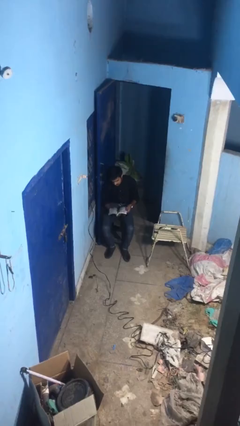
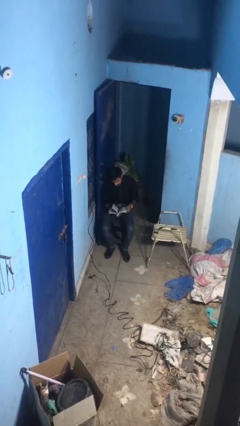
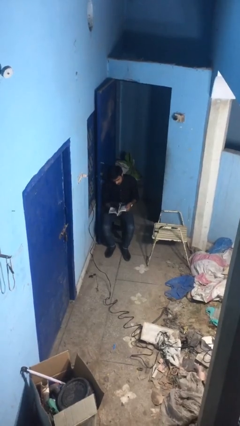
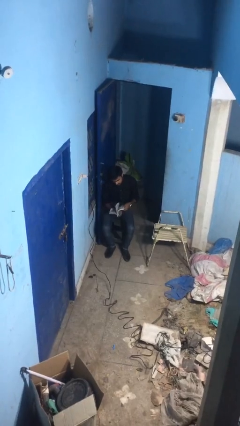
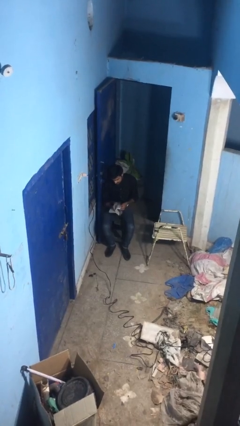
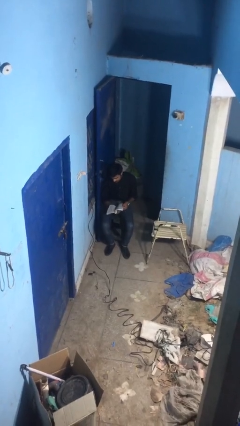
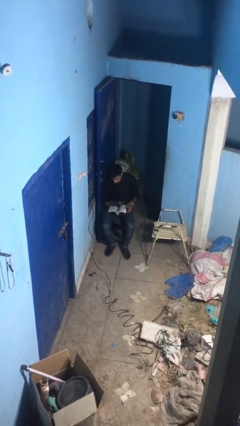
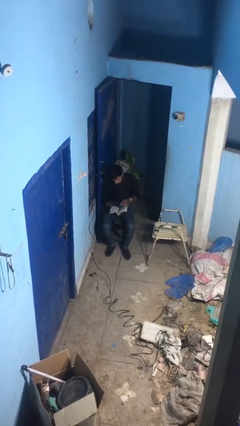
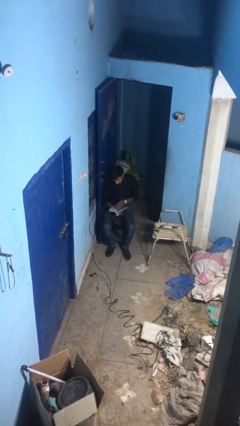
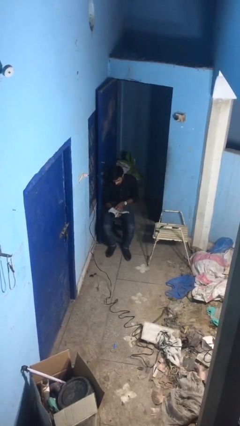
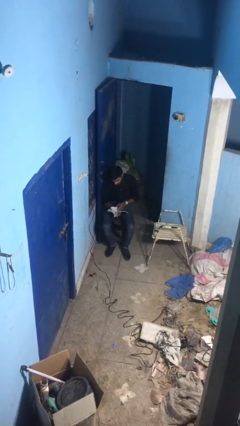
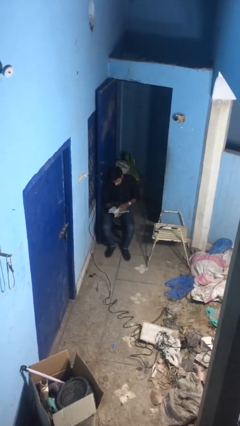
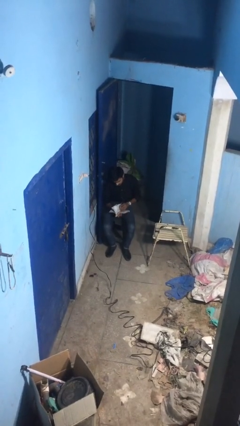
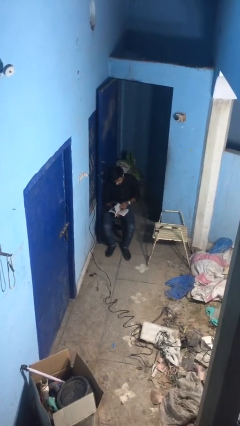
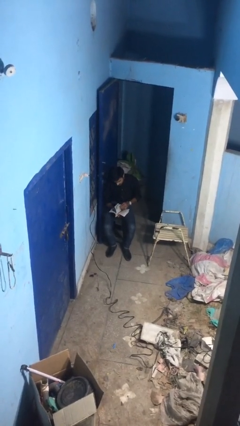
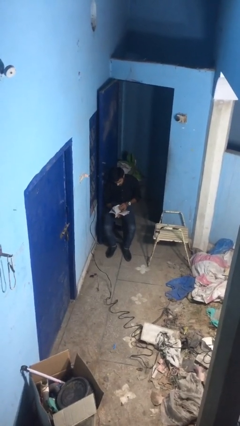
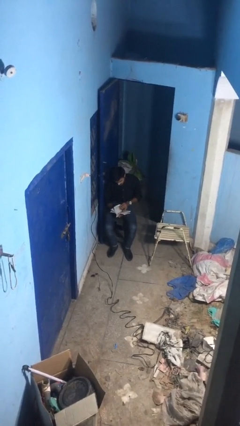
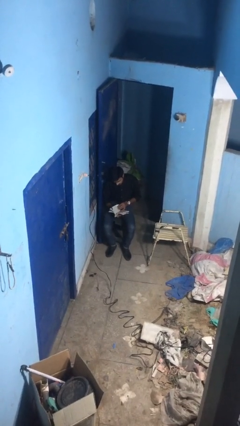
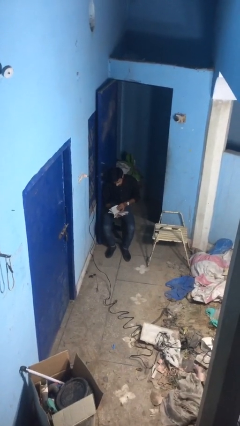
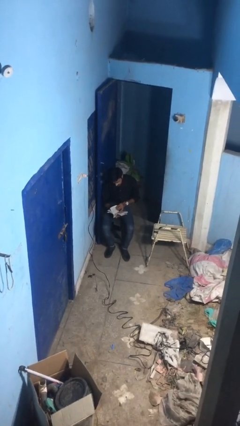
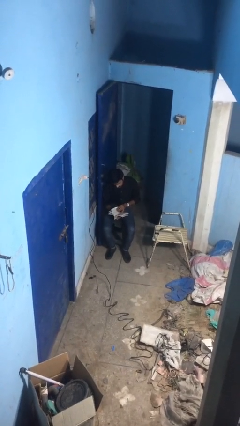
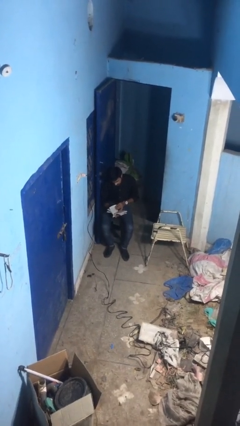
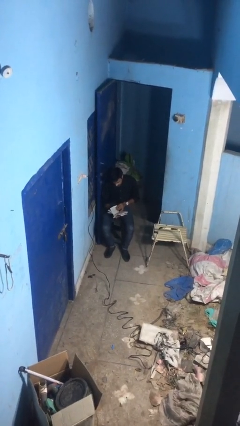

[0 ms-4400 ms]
person reads document

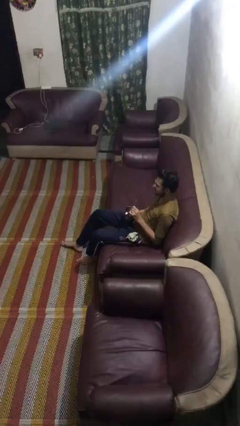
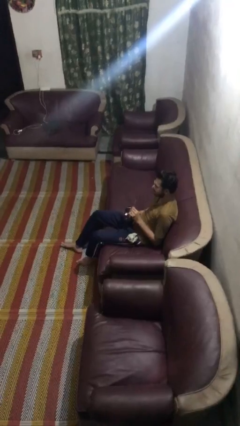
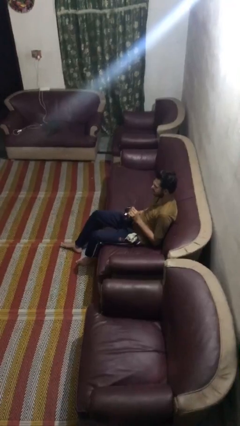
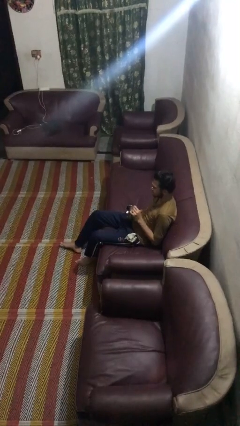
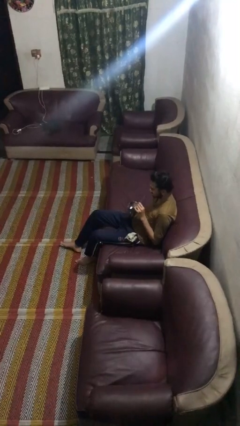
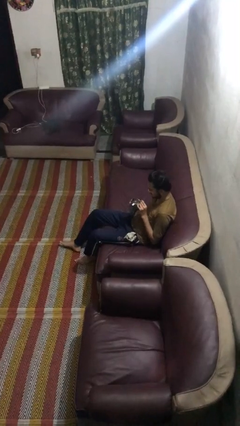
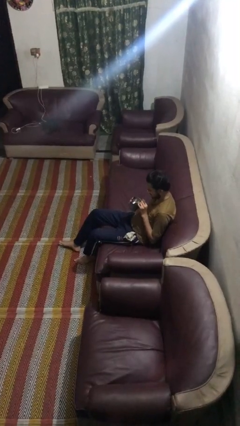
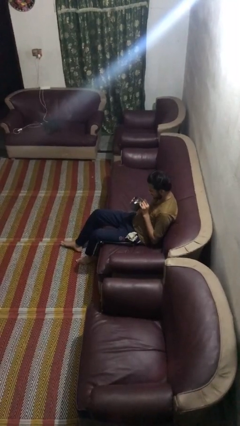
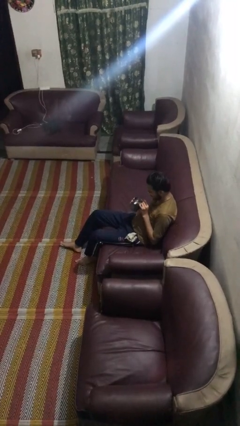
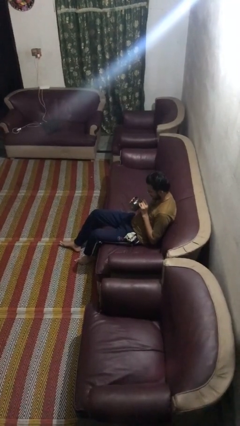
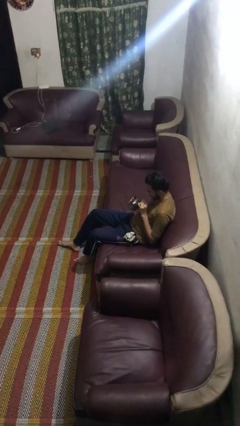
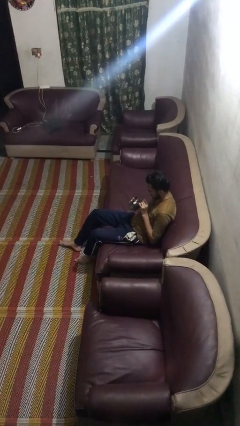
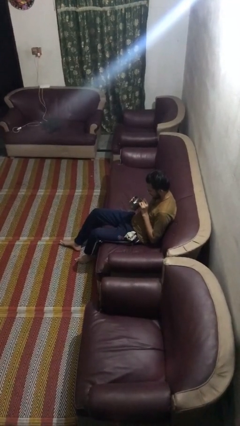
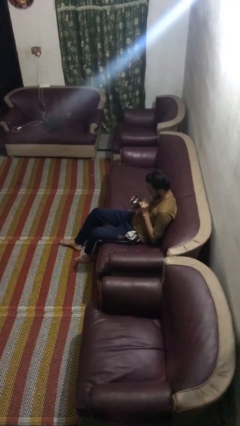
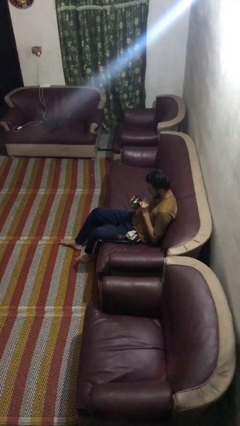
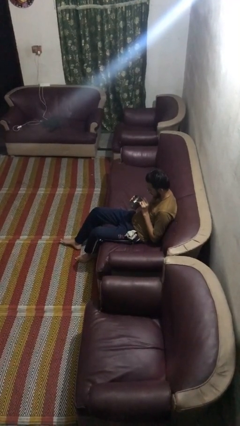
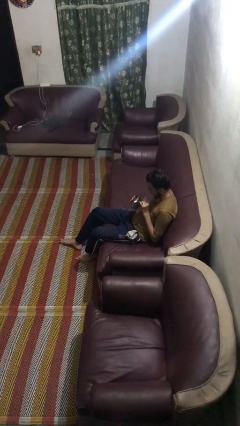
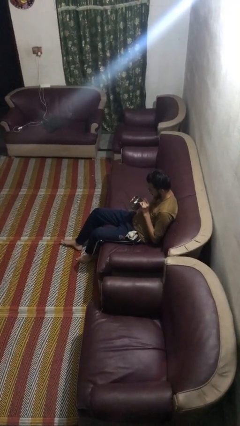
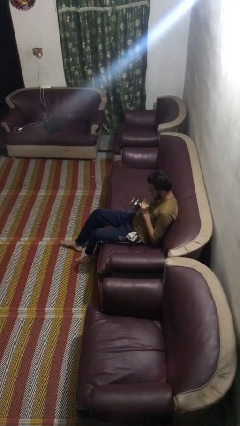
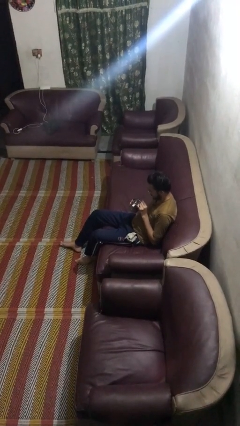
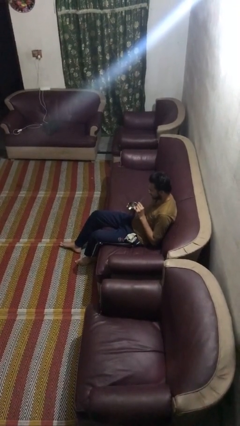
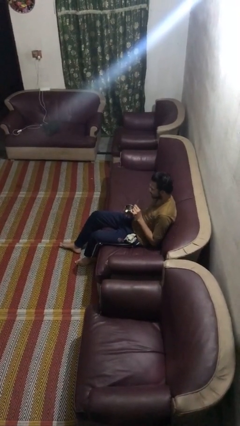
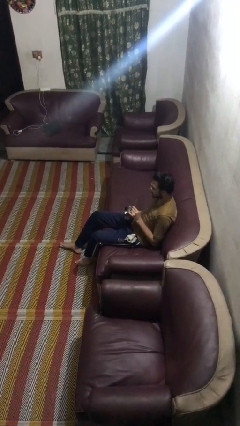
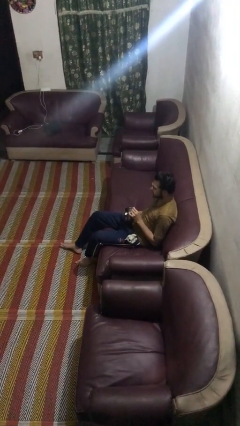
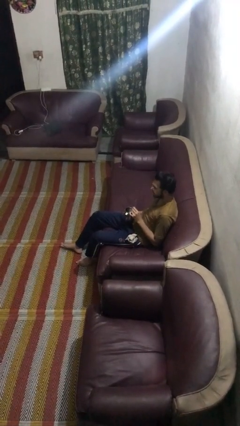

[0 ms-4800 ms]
person drinks from straw

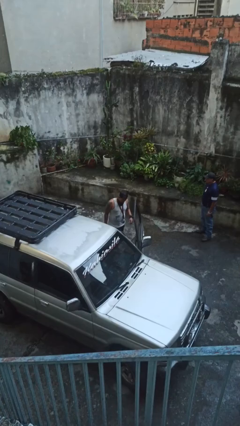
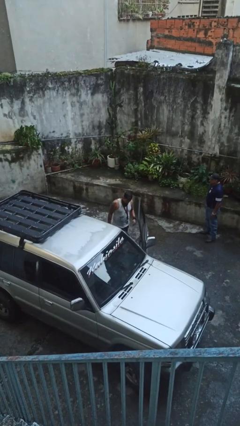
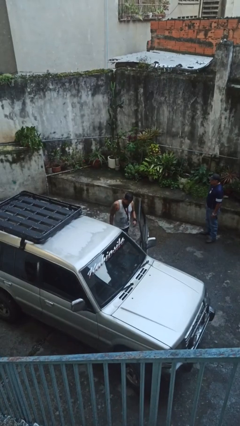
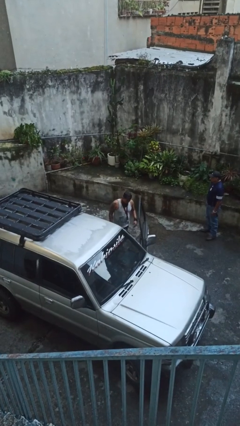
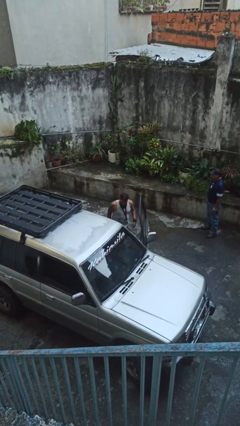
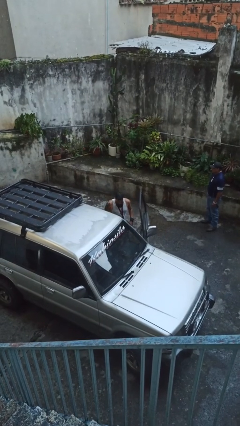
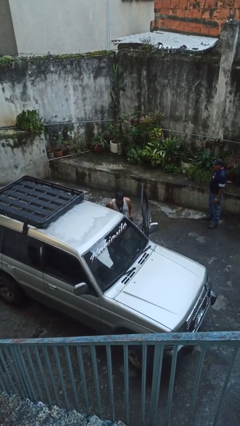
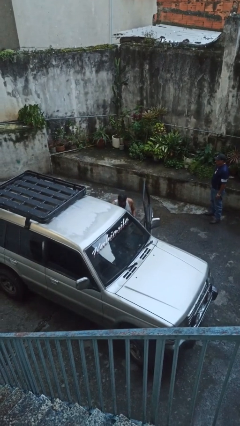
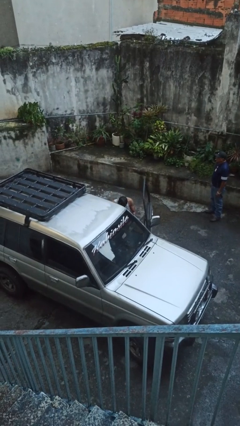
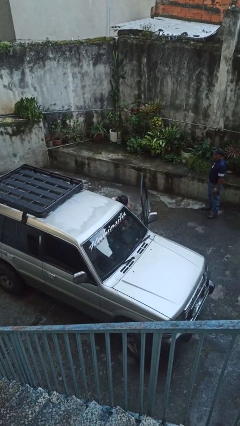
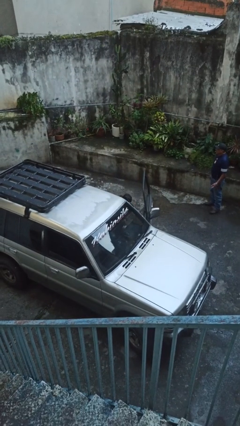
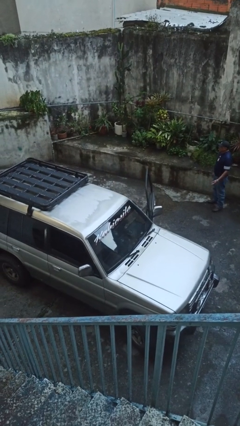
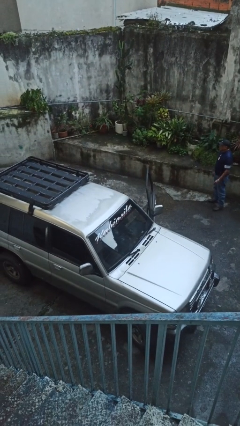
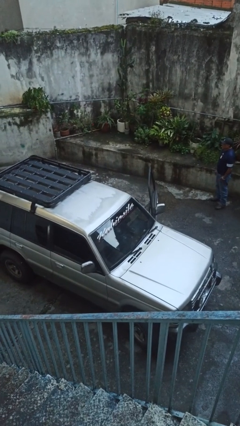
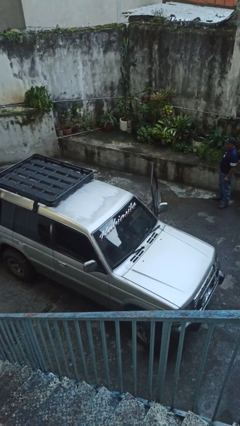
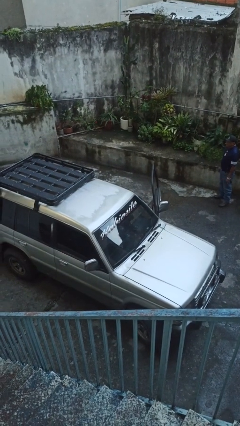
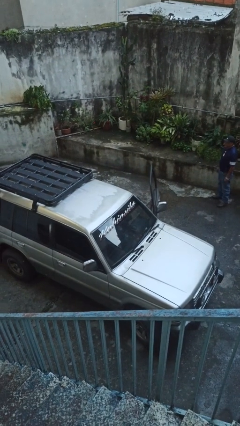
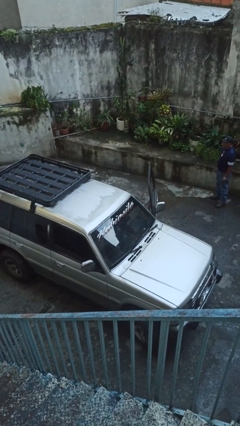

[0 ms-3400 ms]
person enters car

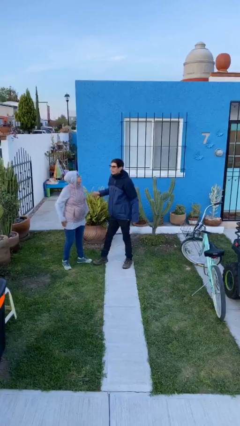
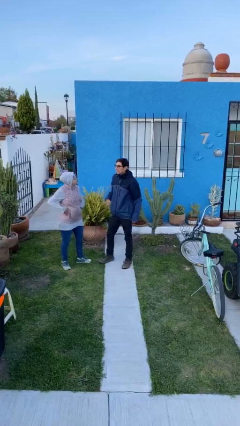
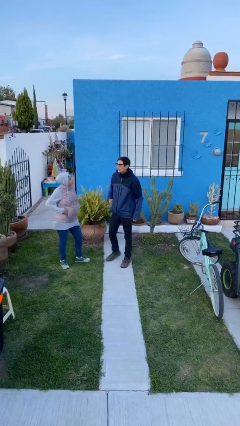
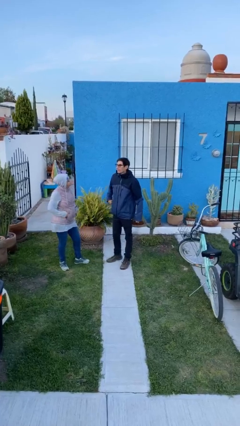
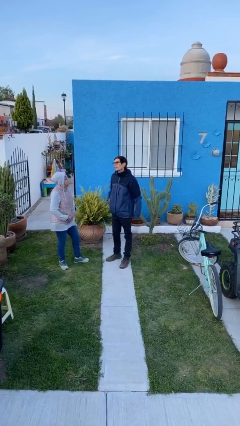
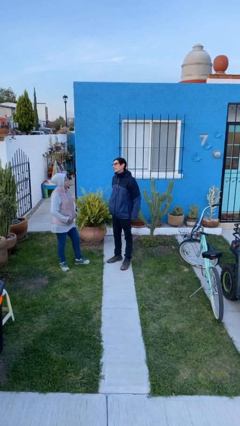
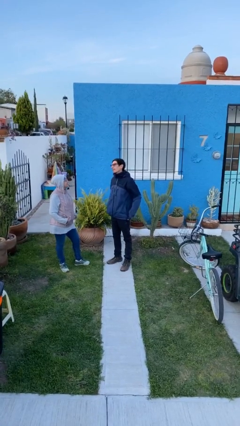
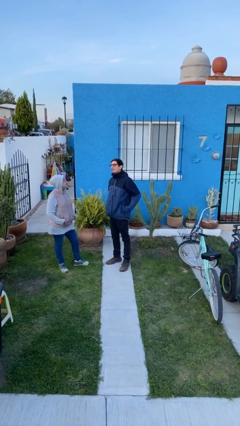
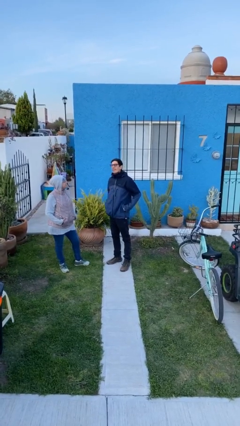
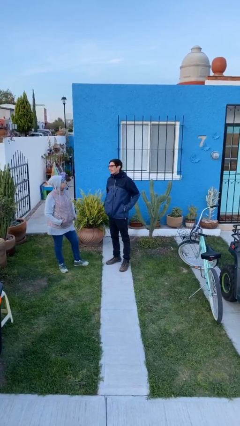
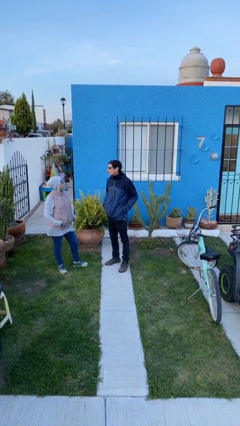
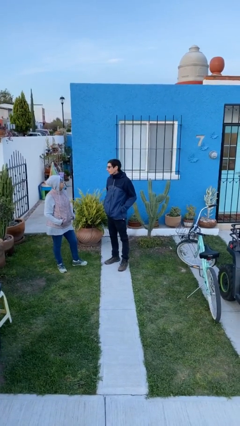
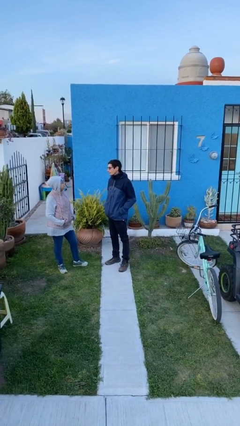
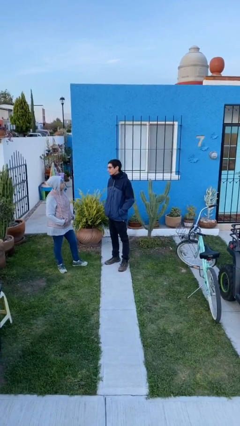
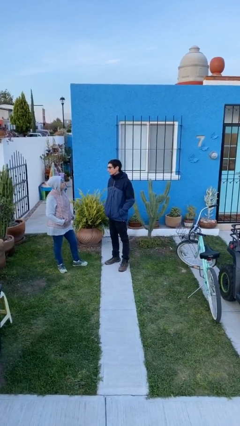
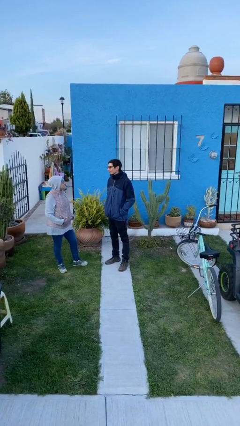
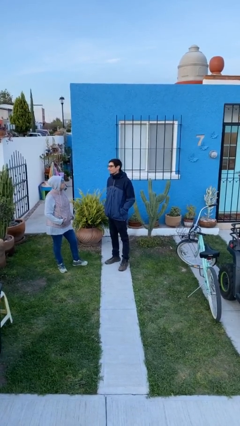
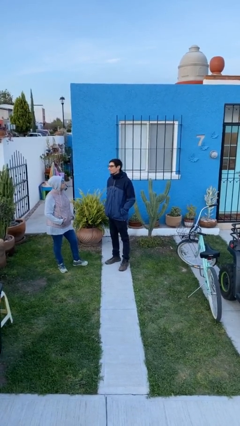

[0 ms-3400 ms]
person talks to person

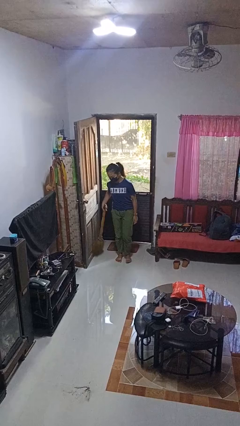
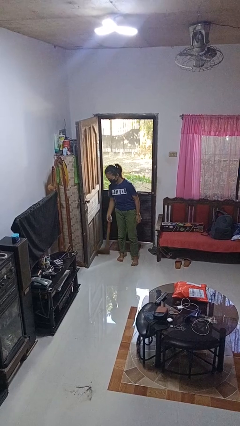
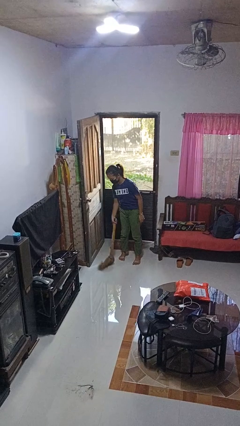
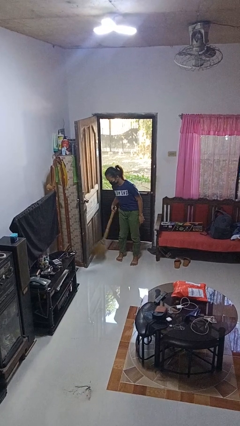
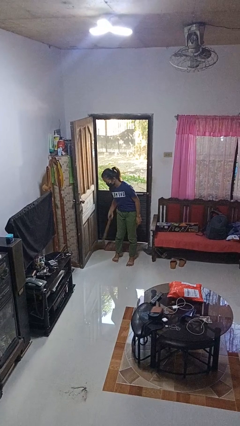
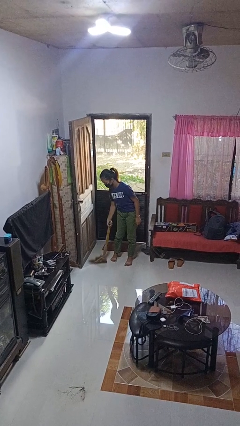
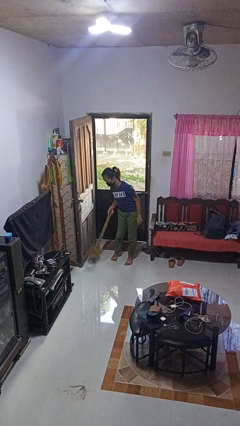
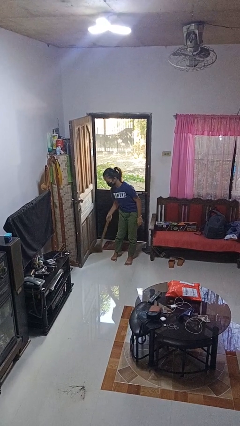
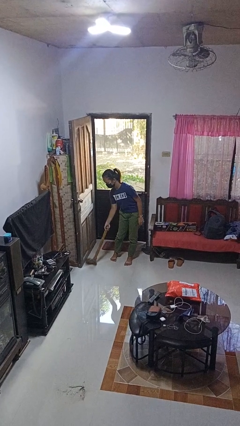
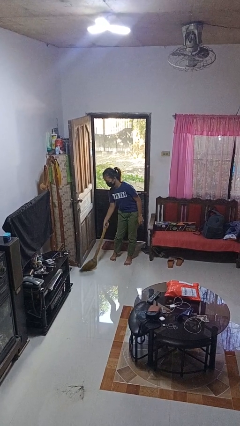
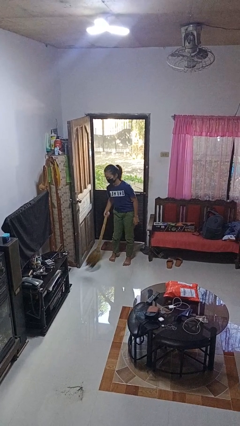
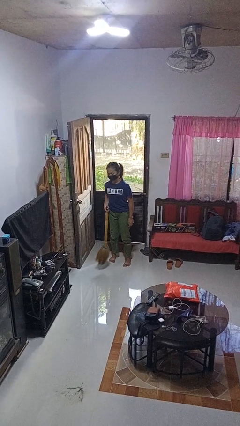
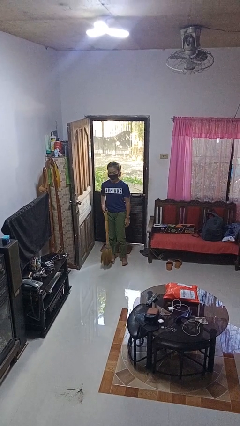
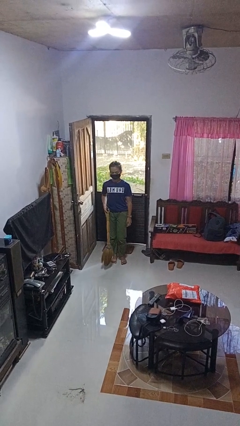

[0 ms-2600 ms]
person sweeps floor
